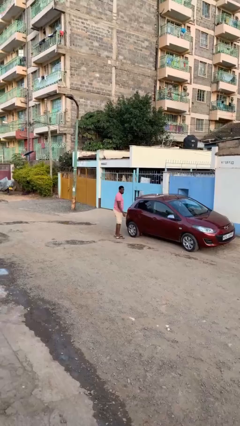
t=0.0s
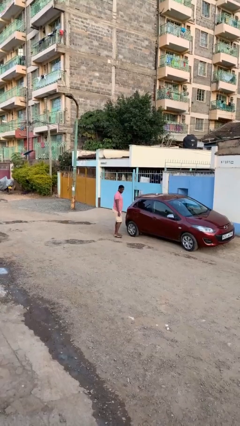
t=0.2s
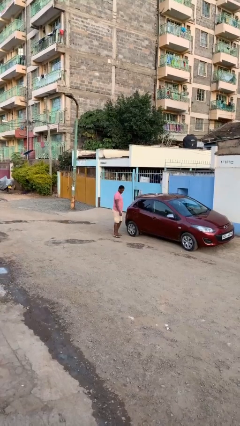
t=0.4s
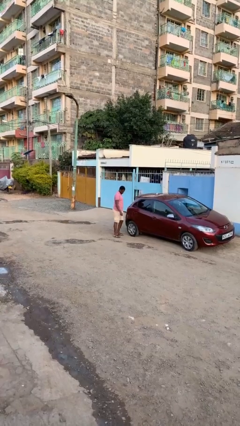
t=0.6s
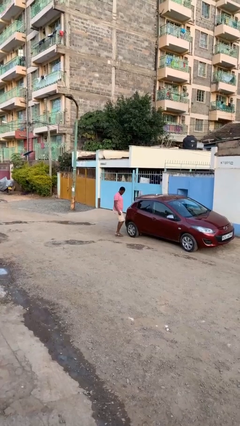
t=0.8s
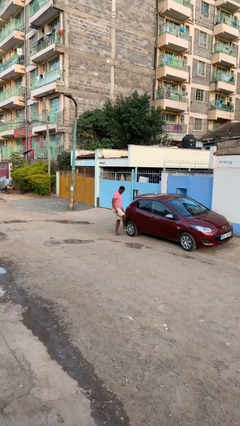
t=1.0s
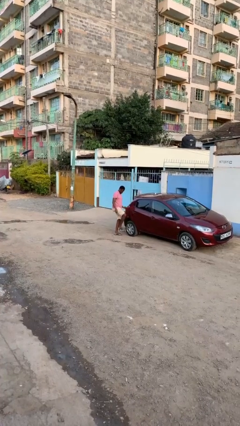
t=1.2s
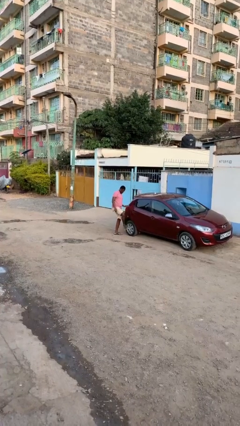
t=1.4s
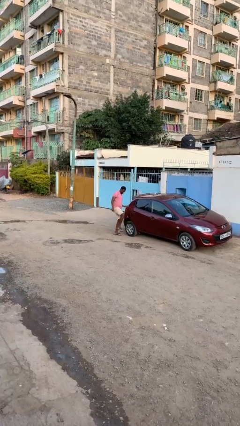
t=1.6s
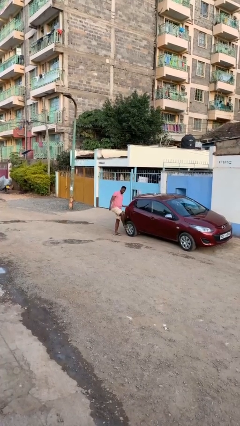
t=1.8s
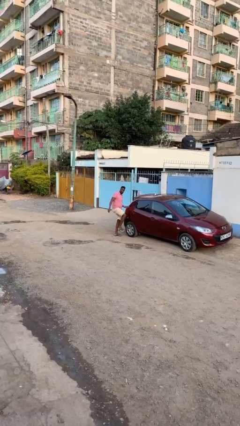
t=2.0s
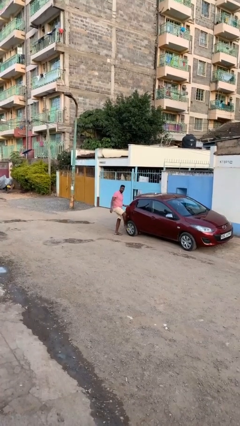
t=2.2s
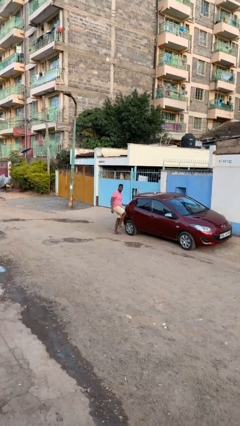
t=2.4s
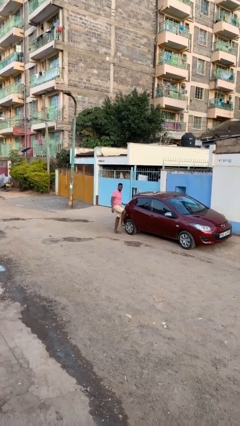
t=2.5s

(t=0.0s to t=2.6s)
person kicks car tires

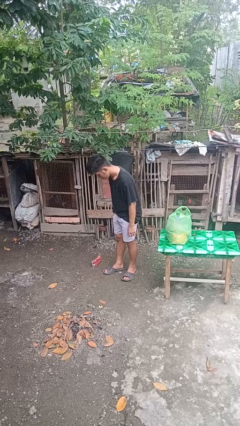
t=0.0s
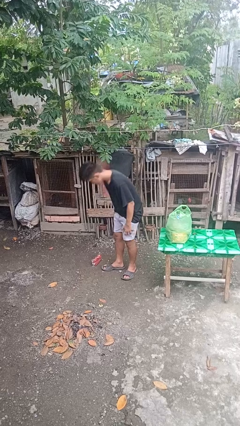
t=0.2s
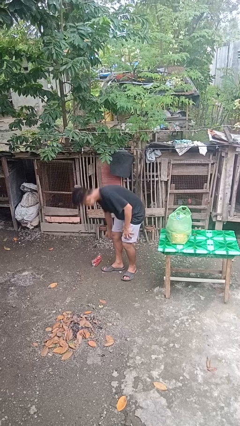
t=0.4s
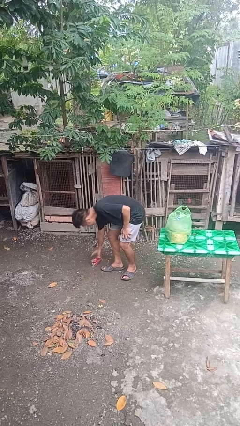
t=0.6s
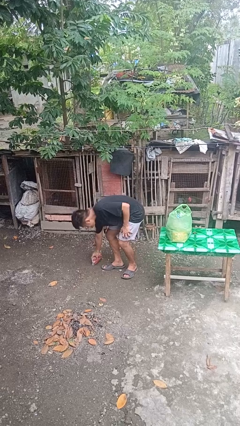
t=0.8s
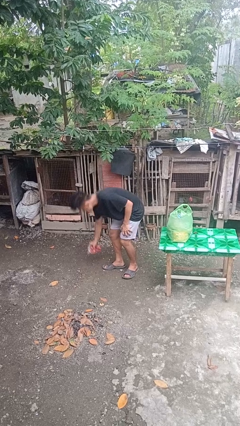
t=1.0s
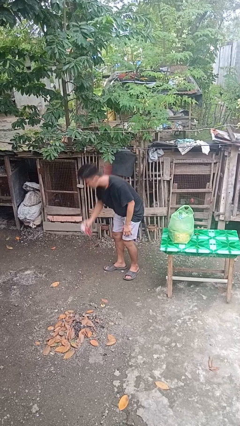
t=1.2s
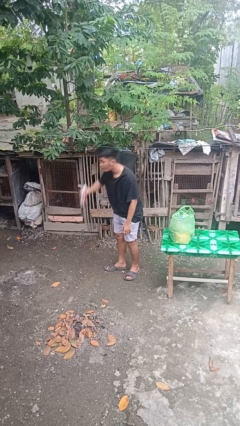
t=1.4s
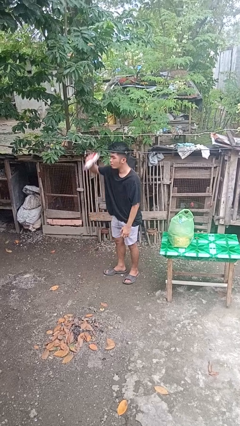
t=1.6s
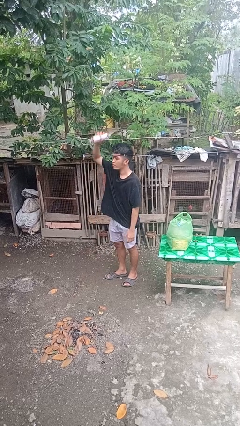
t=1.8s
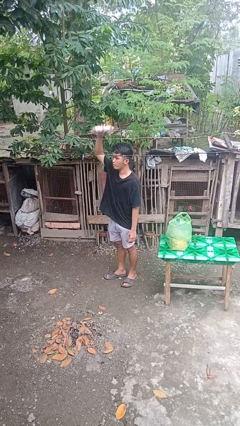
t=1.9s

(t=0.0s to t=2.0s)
person picks up object from floor

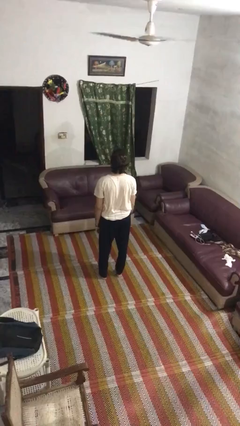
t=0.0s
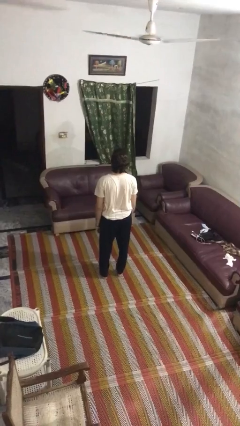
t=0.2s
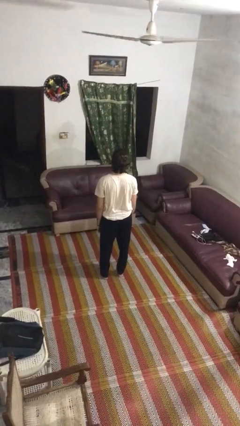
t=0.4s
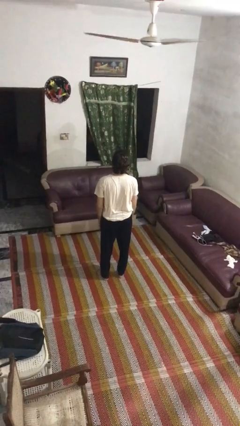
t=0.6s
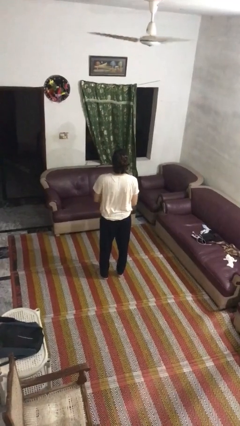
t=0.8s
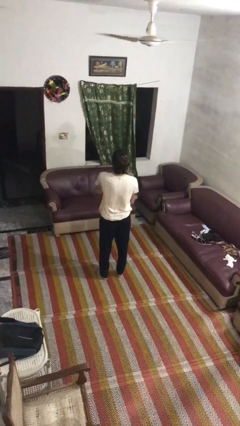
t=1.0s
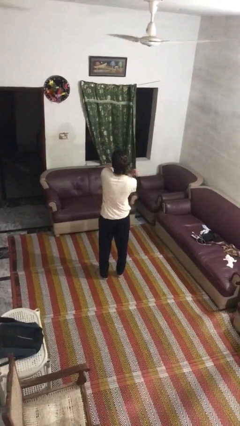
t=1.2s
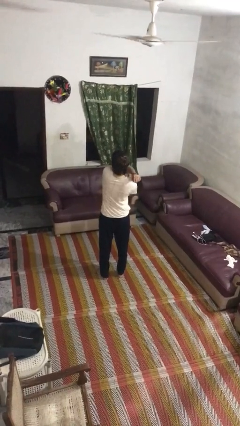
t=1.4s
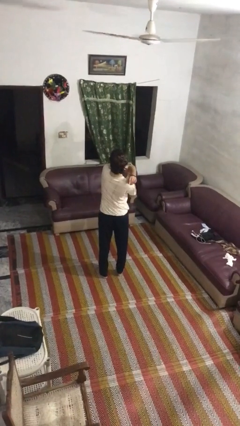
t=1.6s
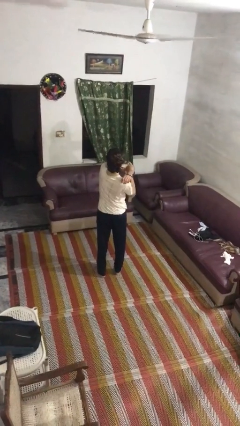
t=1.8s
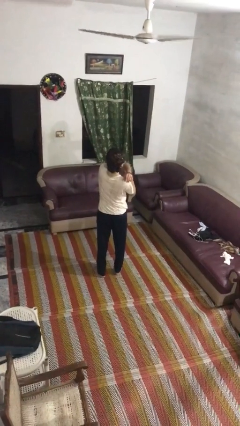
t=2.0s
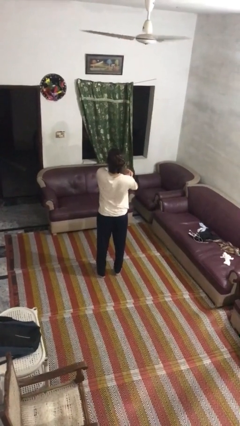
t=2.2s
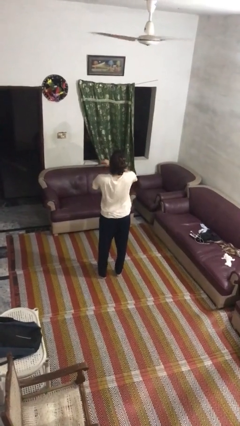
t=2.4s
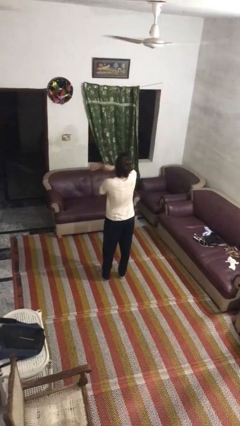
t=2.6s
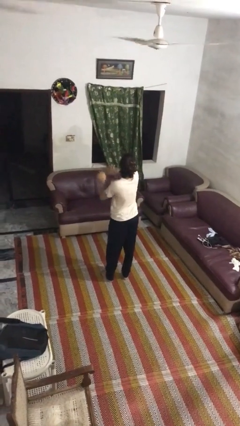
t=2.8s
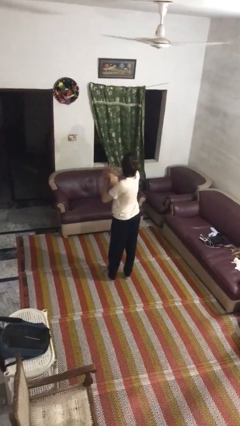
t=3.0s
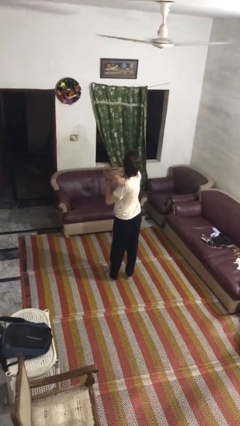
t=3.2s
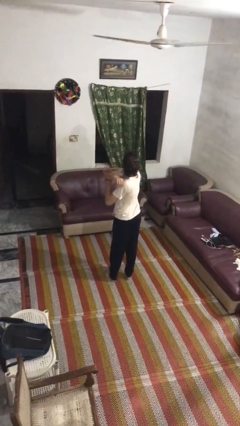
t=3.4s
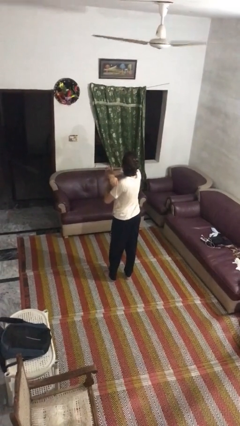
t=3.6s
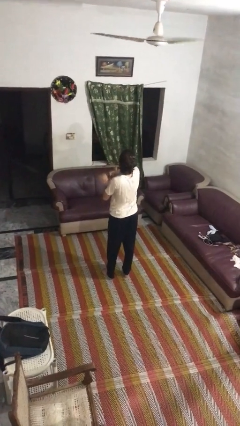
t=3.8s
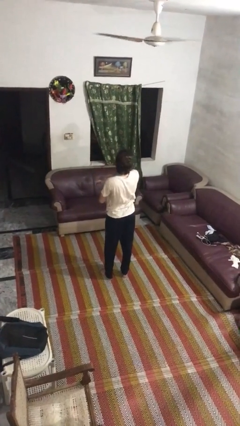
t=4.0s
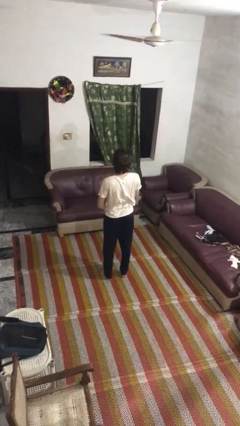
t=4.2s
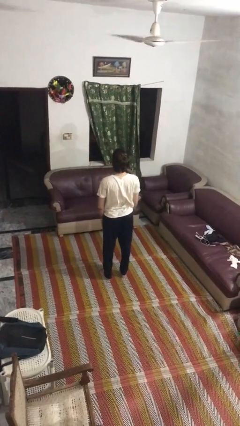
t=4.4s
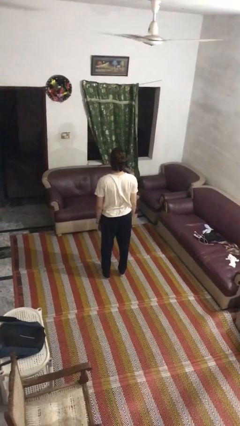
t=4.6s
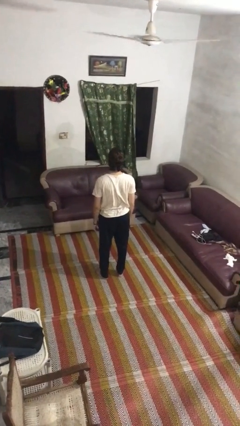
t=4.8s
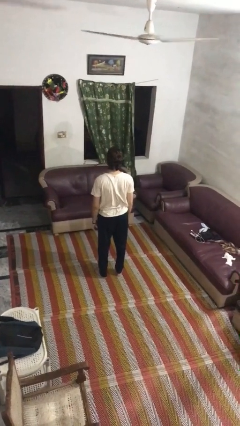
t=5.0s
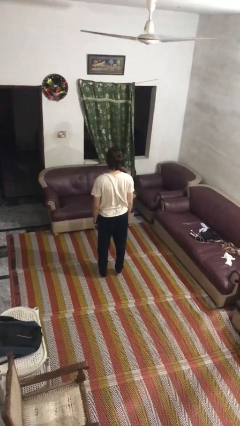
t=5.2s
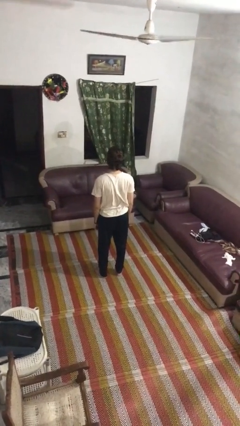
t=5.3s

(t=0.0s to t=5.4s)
person stretches arms to side

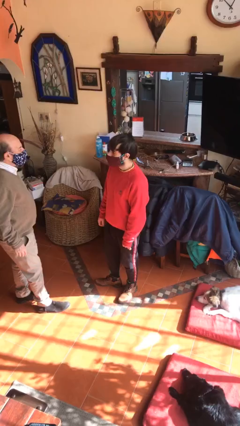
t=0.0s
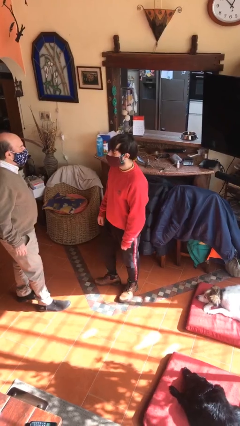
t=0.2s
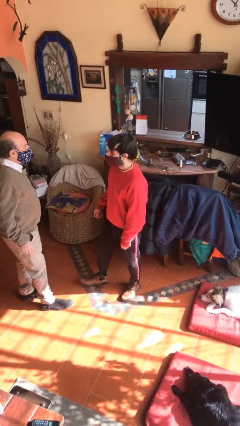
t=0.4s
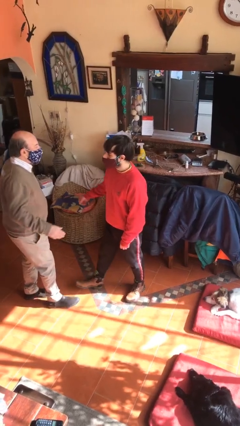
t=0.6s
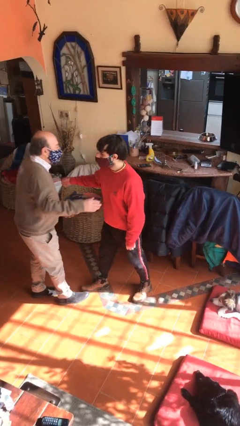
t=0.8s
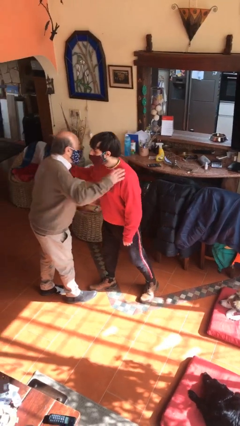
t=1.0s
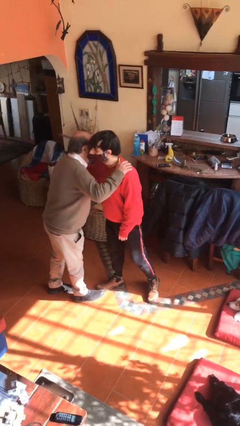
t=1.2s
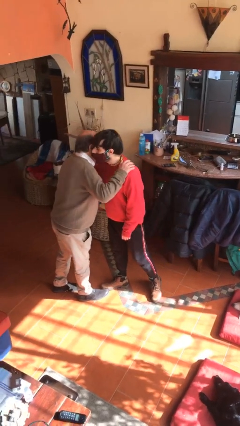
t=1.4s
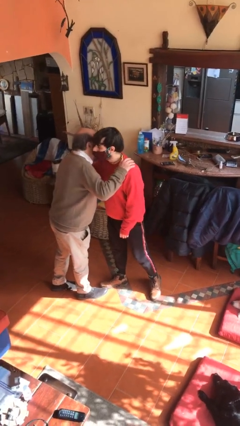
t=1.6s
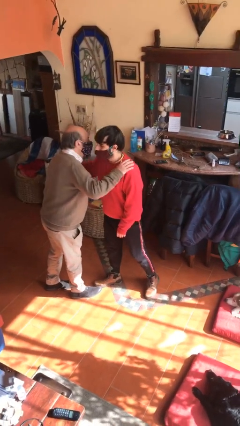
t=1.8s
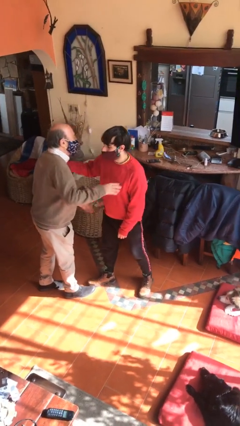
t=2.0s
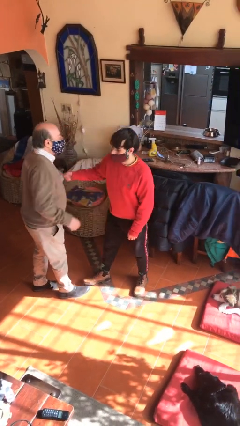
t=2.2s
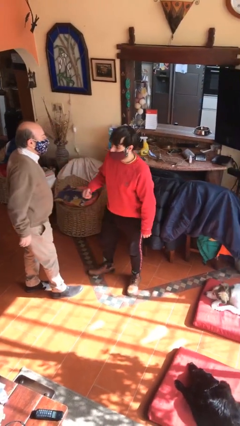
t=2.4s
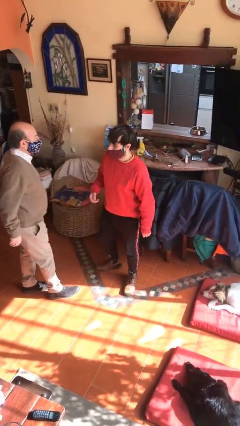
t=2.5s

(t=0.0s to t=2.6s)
person kisses cheek of person

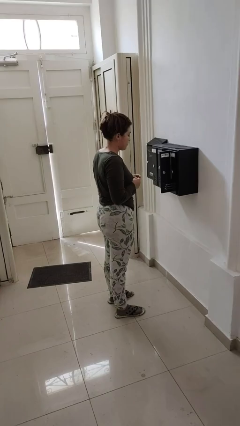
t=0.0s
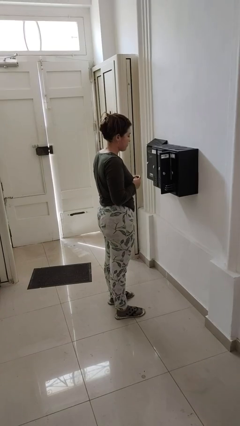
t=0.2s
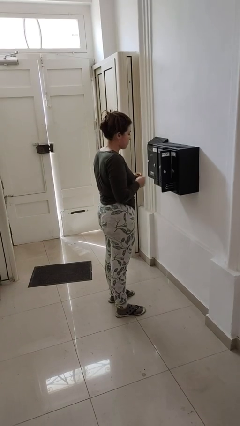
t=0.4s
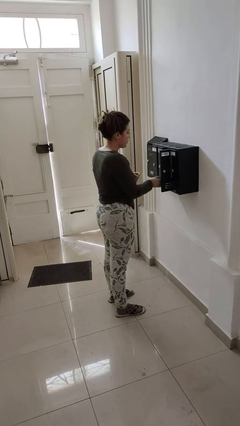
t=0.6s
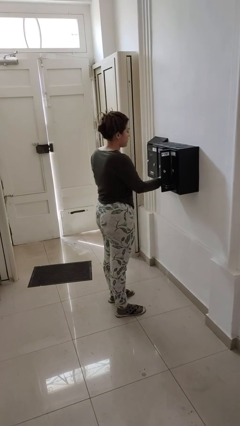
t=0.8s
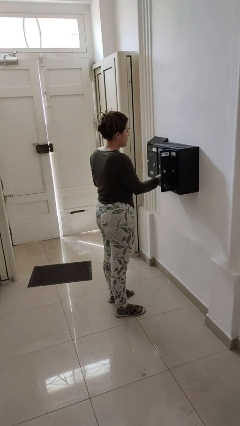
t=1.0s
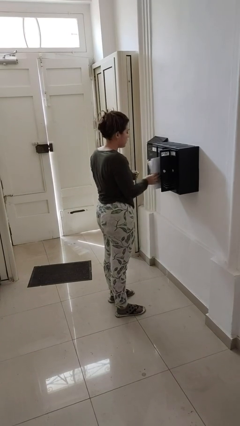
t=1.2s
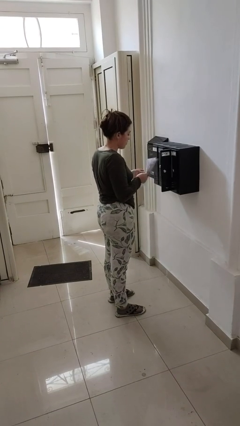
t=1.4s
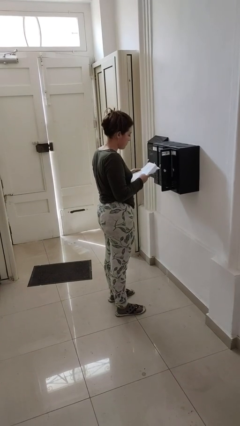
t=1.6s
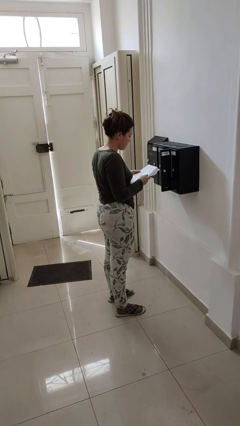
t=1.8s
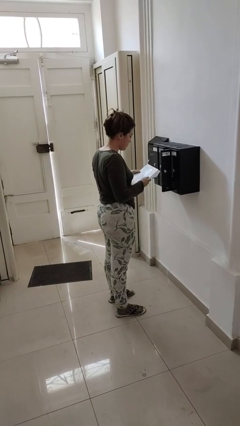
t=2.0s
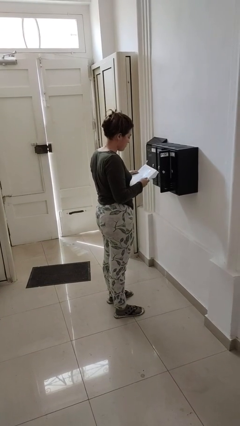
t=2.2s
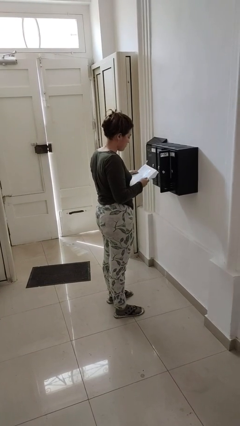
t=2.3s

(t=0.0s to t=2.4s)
person takes letters from mailbox

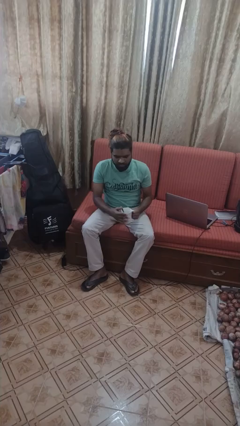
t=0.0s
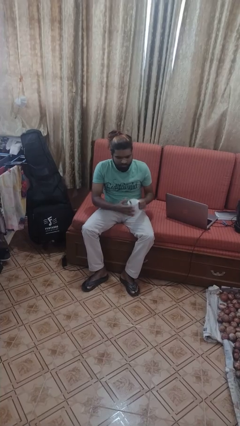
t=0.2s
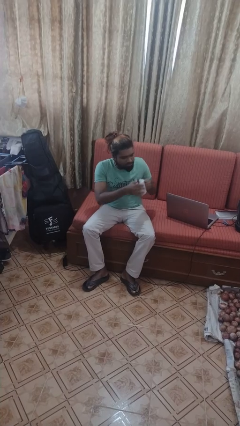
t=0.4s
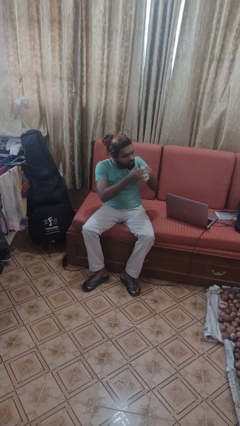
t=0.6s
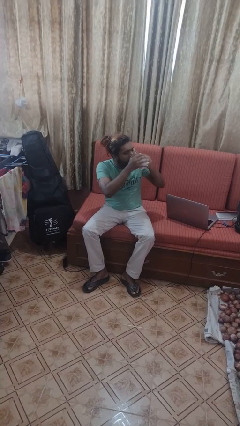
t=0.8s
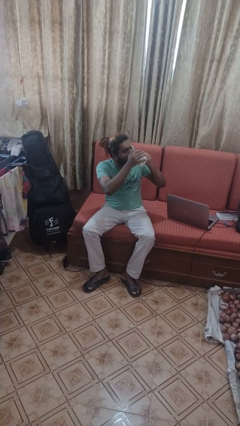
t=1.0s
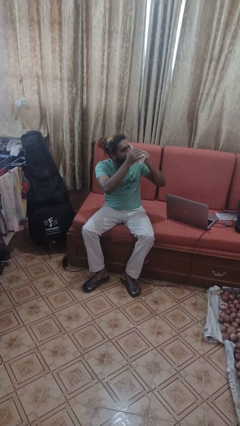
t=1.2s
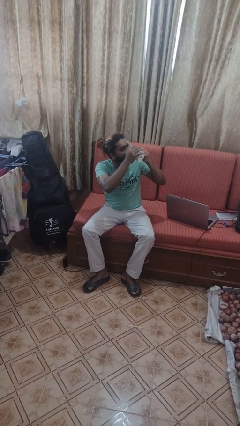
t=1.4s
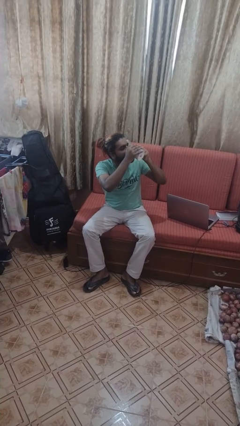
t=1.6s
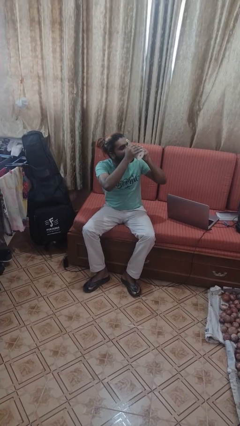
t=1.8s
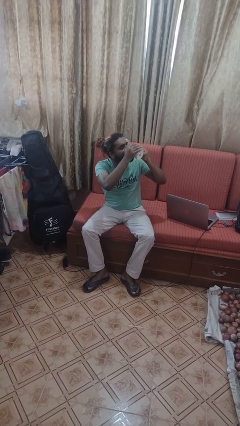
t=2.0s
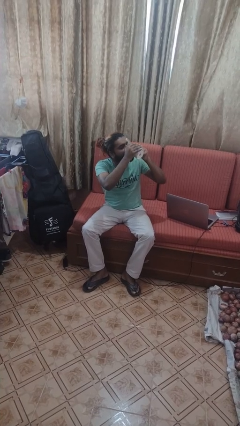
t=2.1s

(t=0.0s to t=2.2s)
person drinks from mug

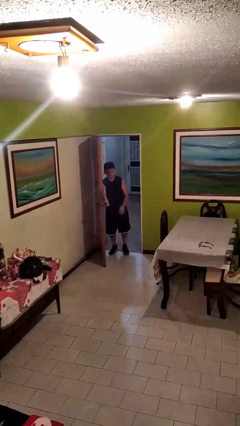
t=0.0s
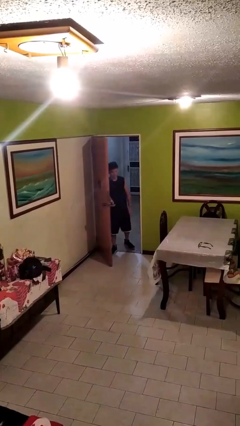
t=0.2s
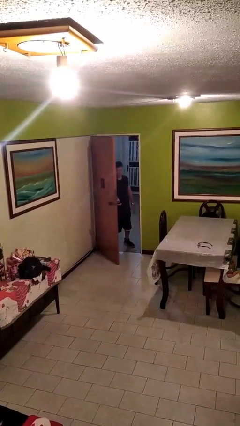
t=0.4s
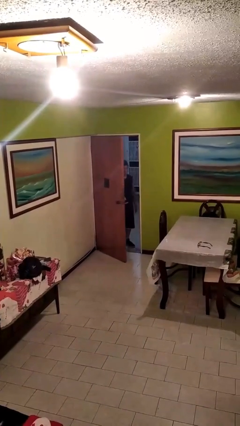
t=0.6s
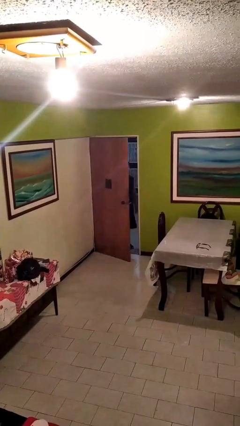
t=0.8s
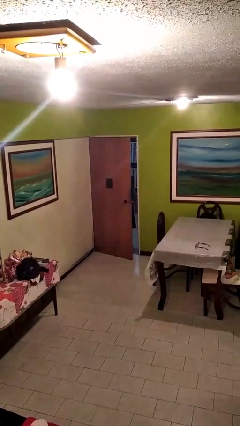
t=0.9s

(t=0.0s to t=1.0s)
person closes facility door
